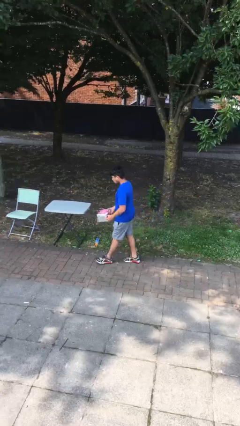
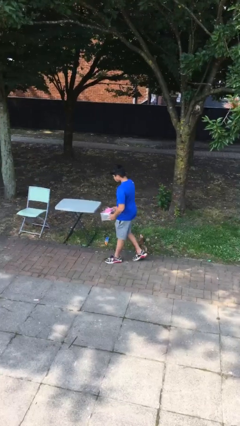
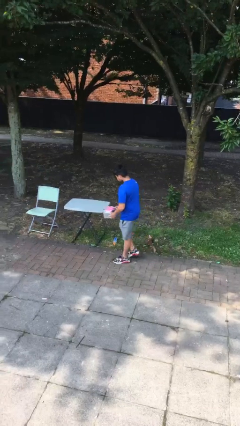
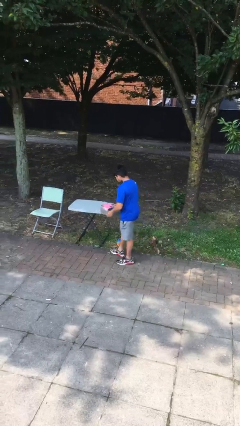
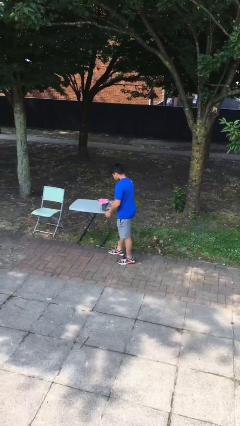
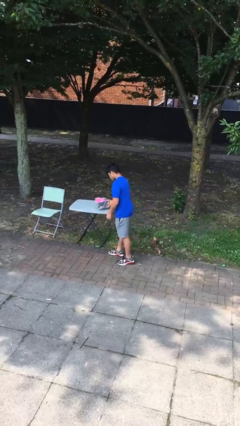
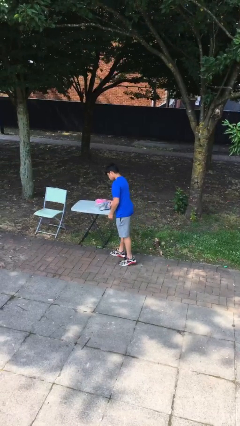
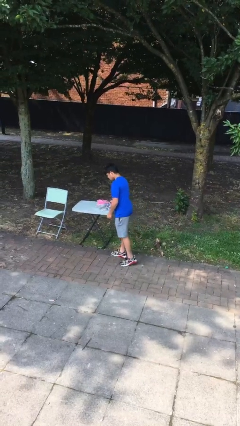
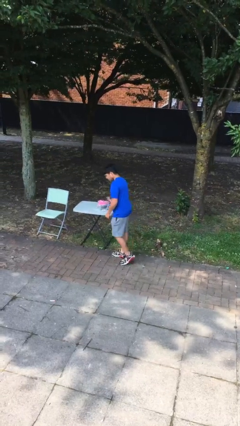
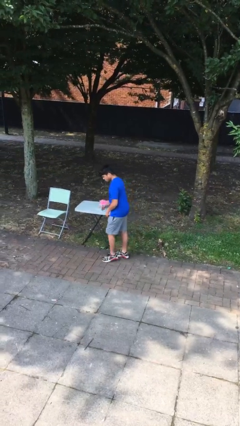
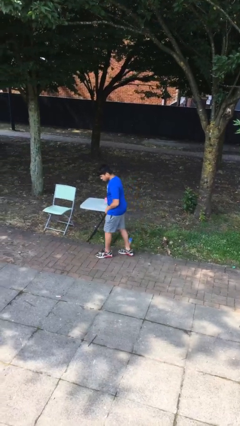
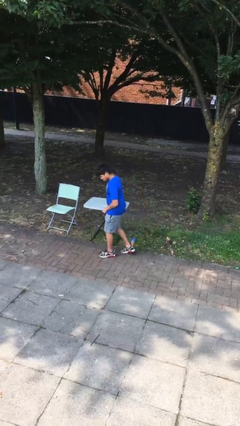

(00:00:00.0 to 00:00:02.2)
person puts down object on table

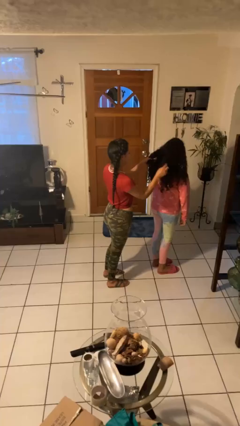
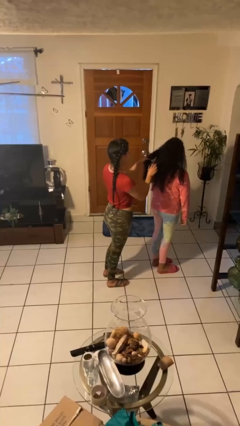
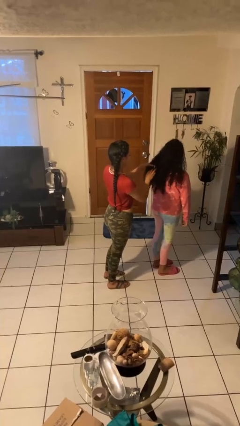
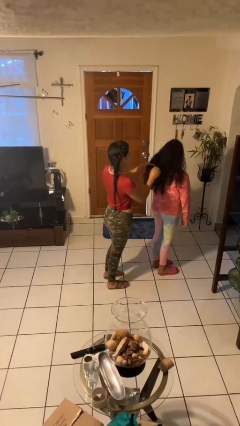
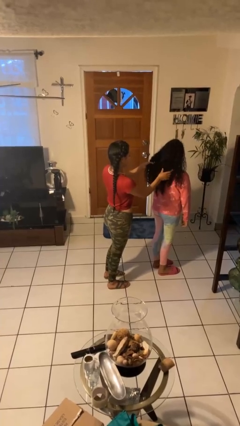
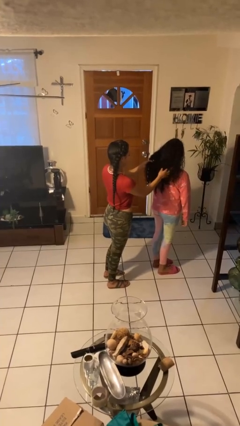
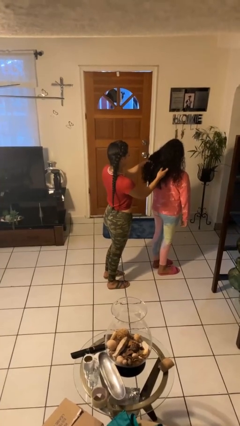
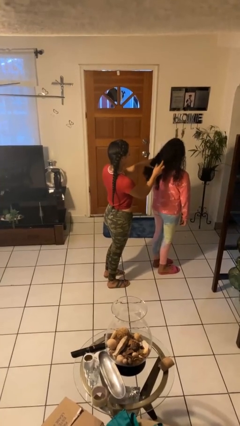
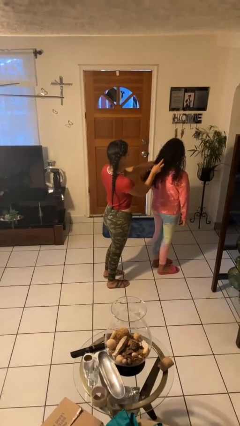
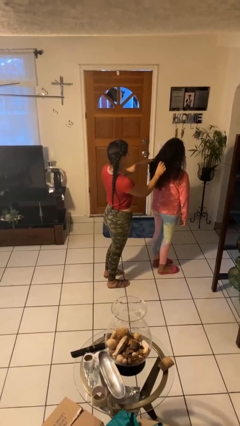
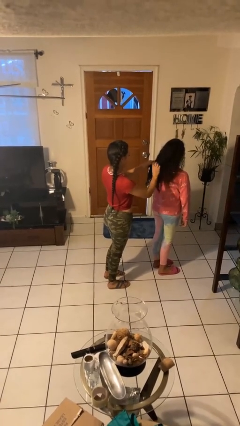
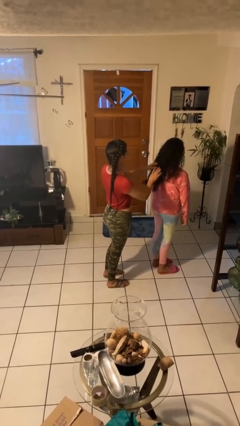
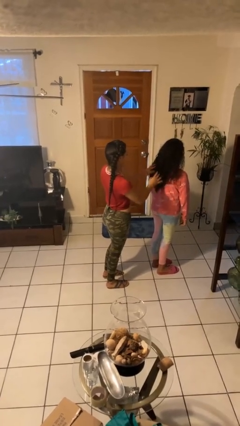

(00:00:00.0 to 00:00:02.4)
person braids hair of person

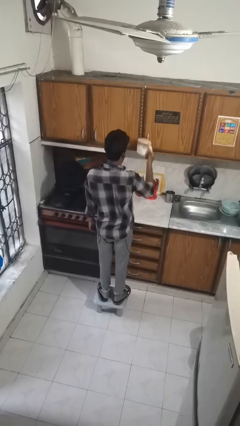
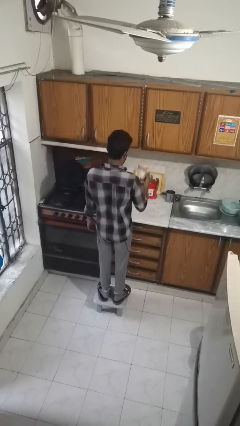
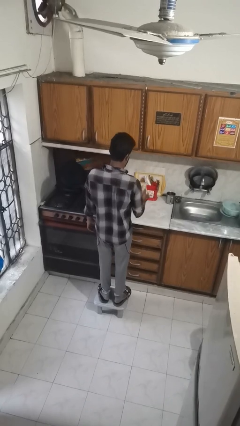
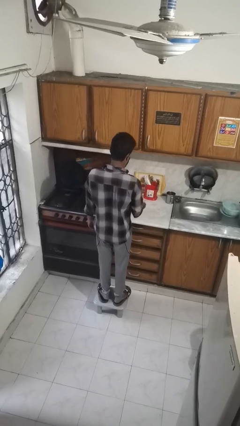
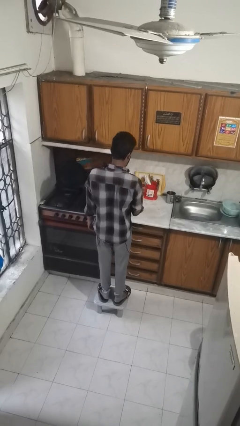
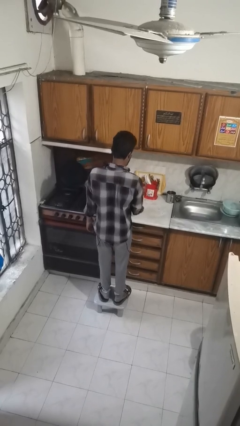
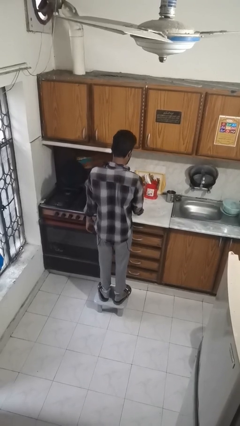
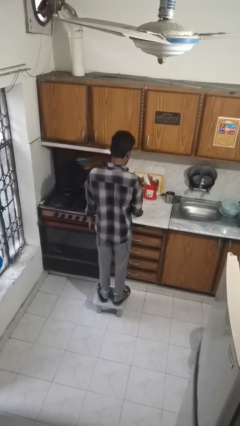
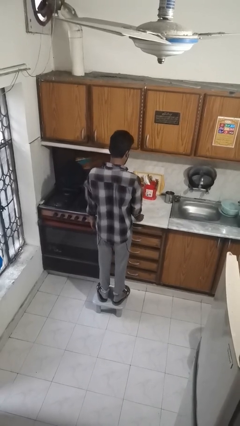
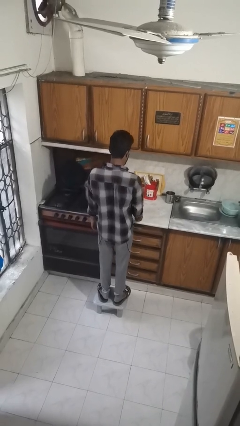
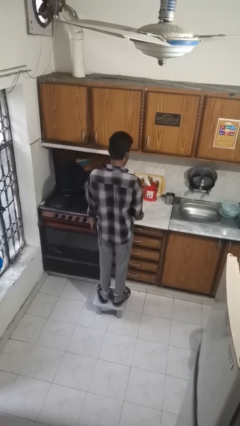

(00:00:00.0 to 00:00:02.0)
person puts down object on shelf

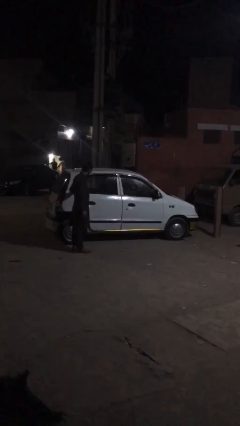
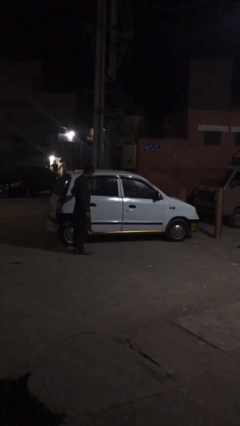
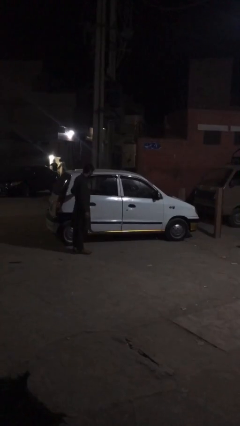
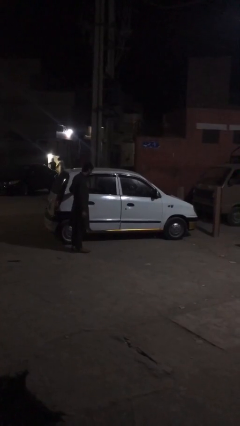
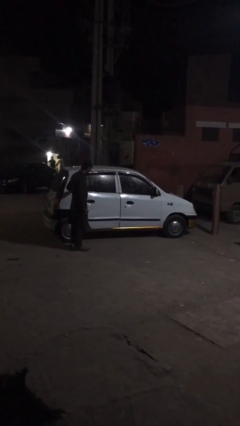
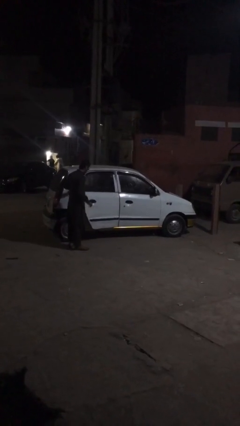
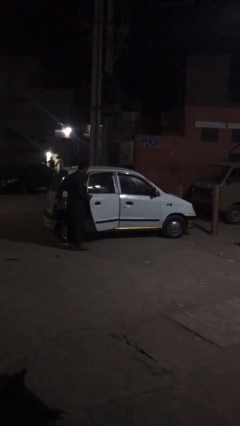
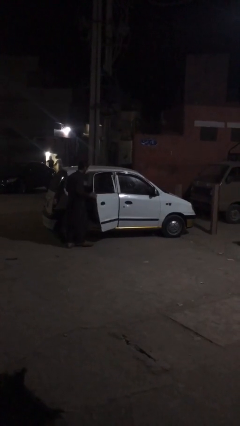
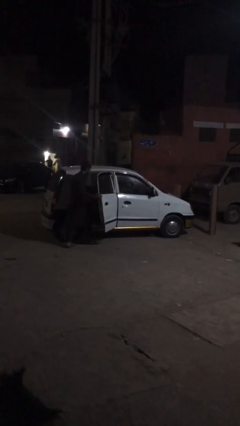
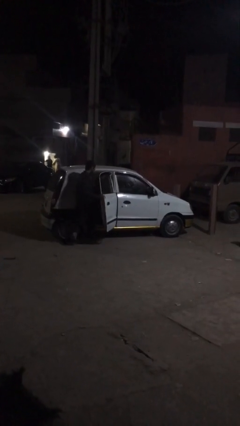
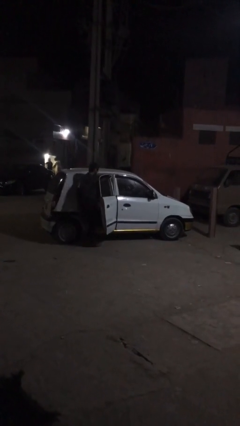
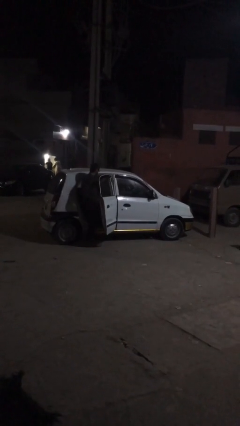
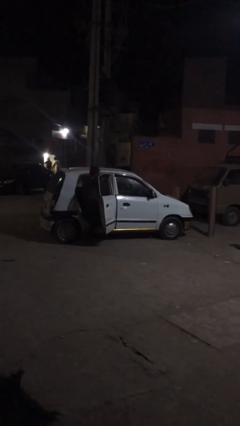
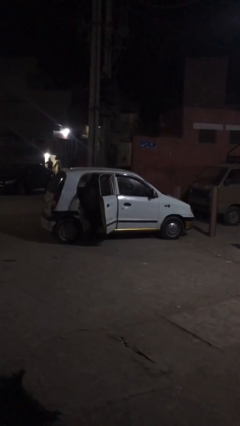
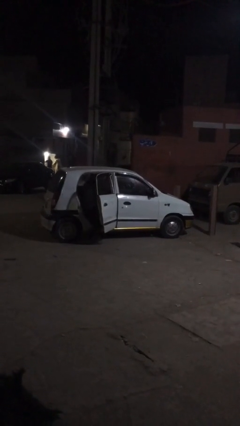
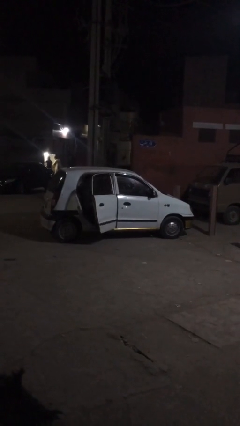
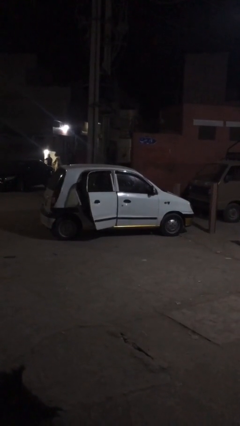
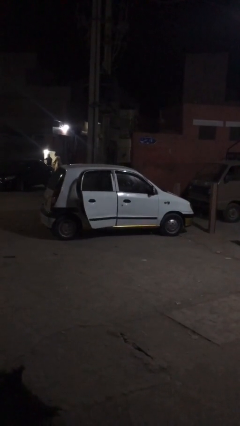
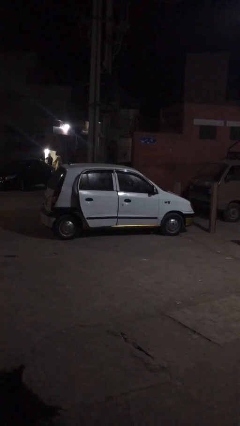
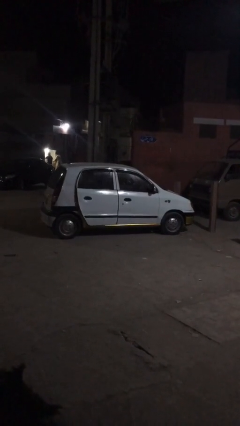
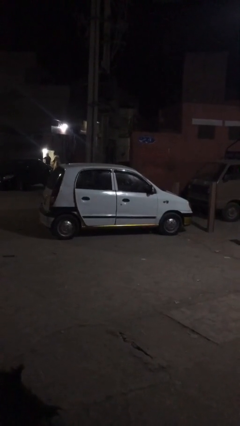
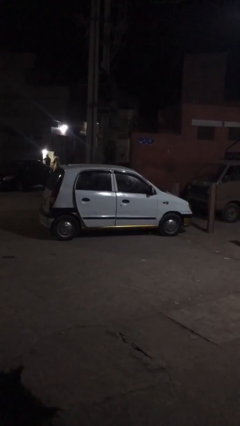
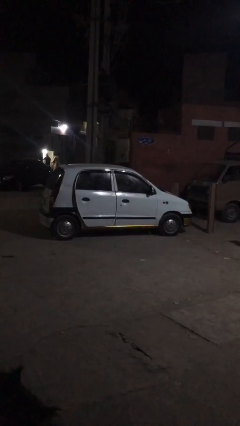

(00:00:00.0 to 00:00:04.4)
car picks up person

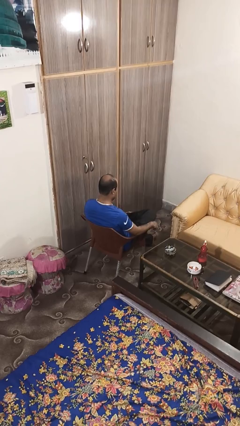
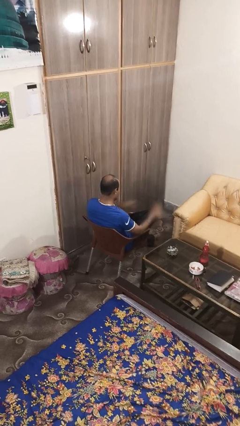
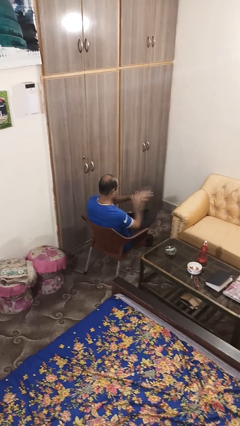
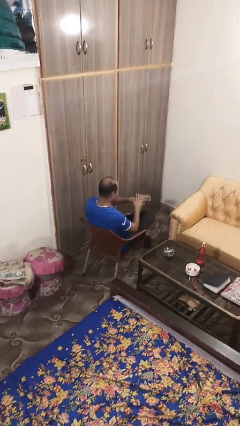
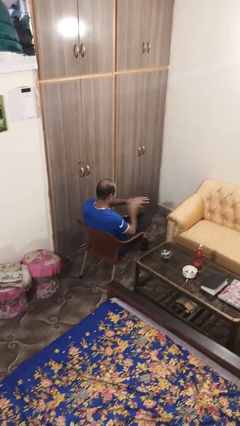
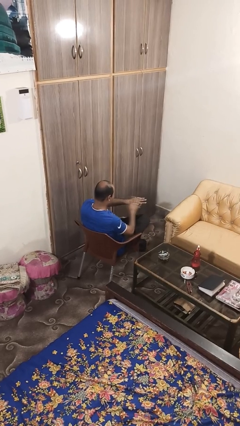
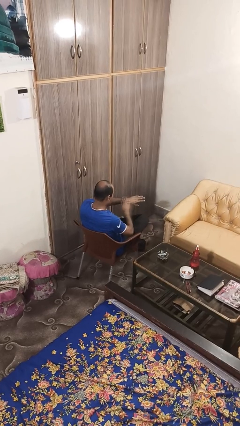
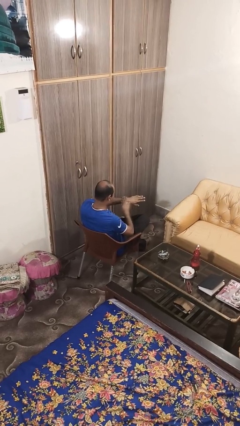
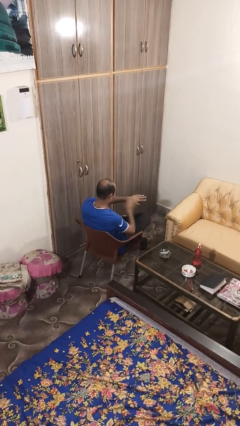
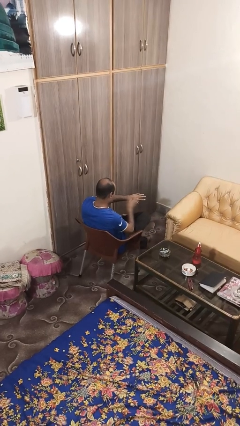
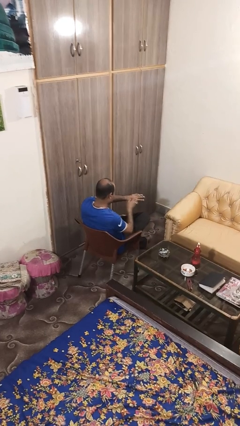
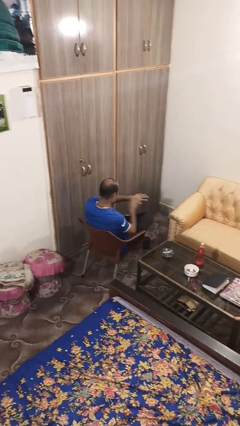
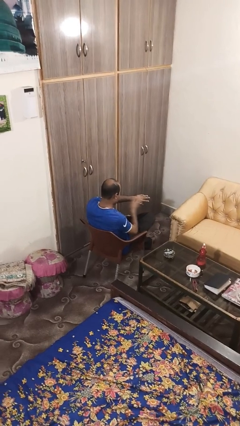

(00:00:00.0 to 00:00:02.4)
person swats bug

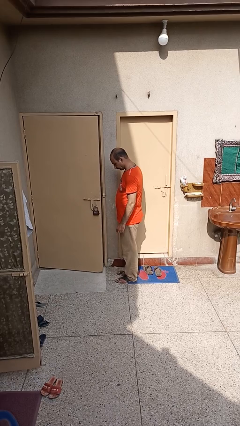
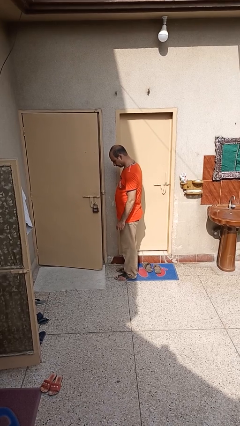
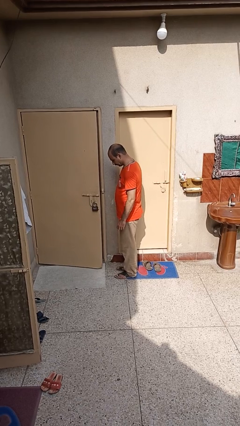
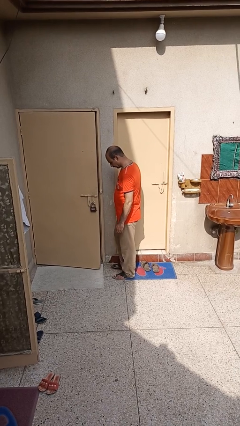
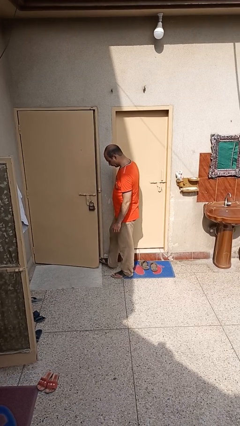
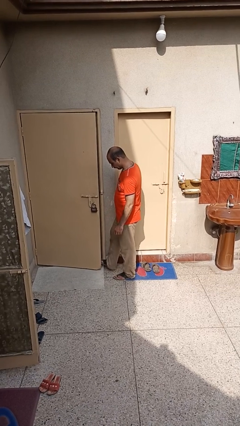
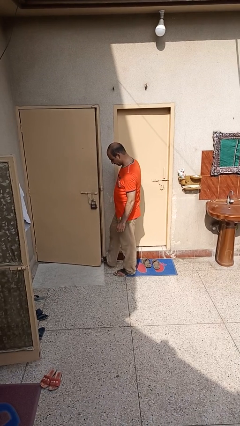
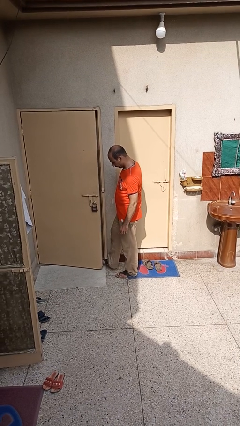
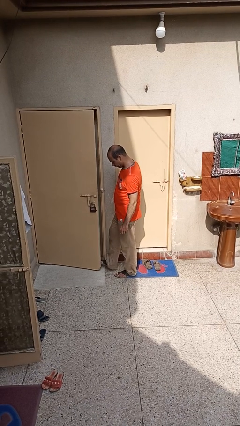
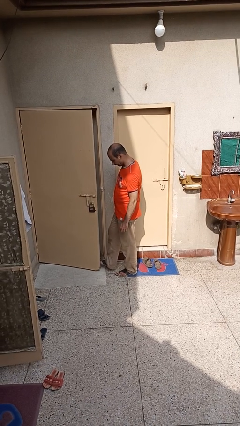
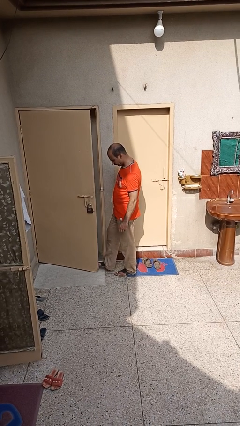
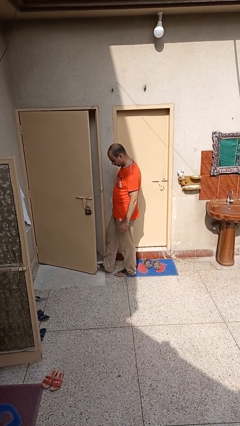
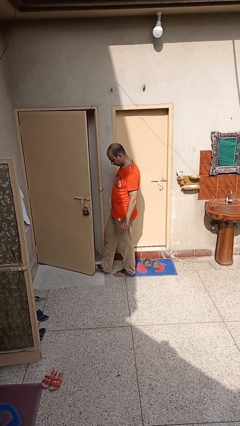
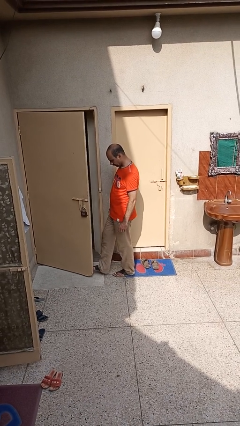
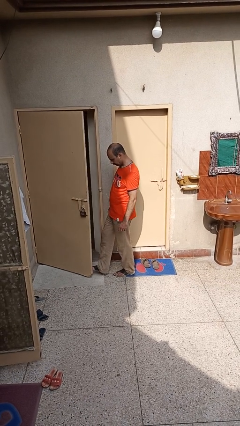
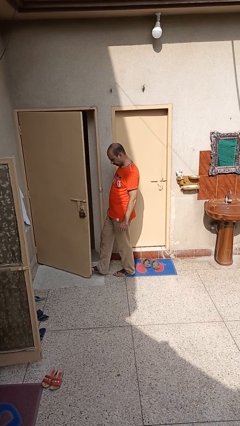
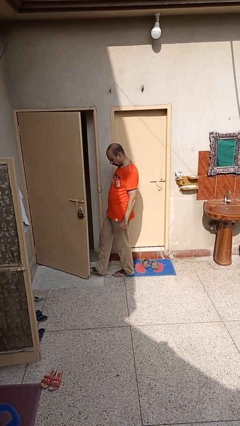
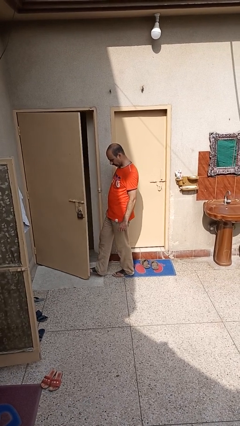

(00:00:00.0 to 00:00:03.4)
person opens facility door

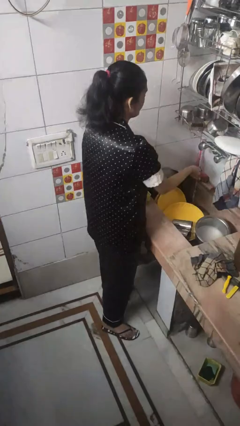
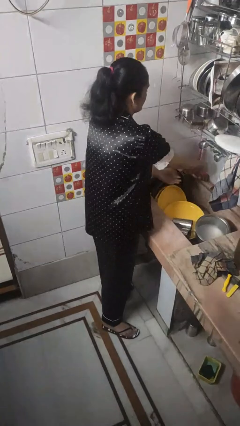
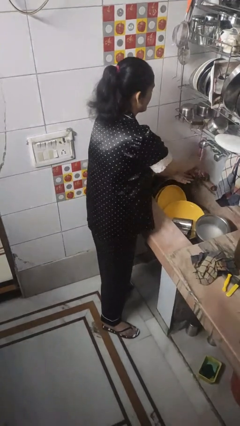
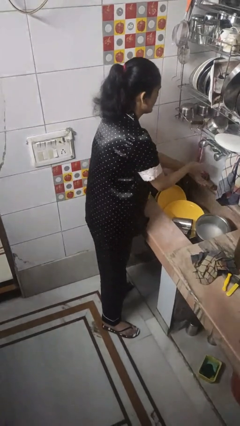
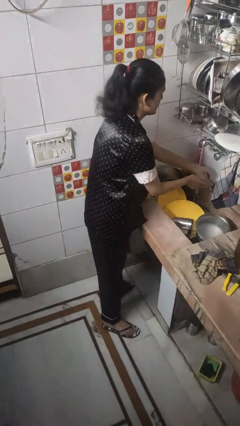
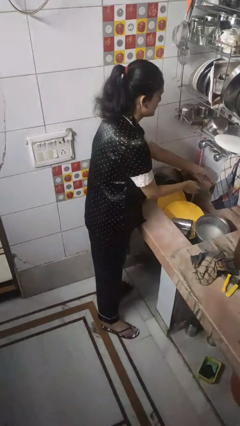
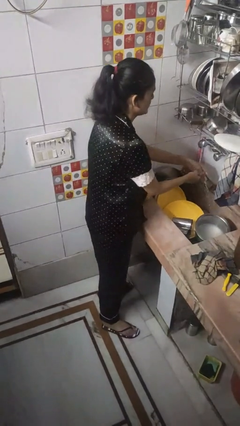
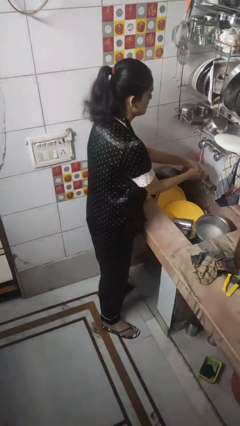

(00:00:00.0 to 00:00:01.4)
person washes hands
